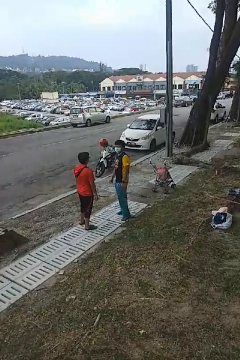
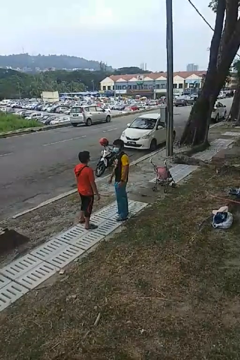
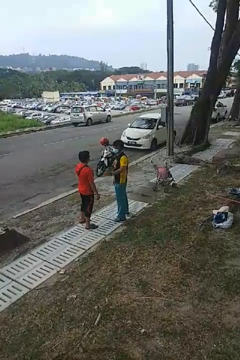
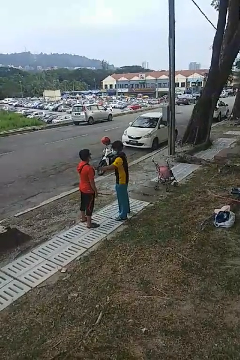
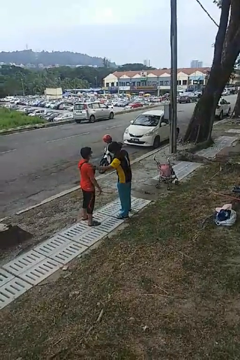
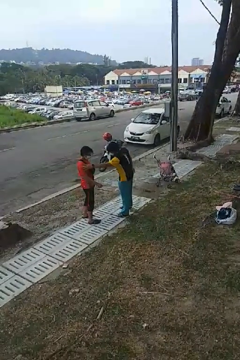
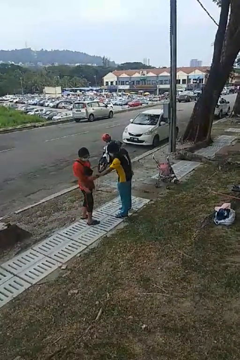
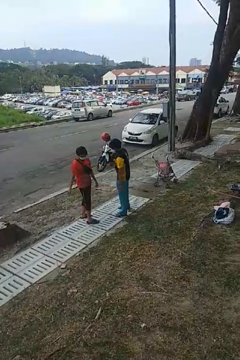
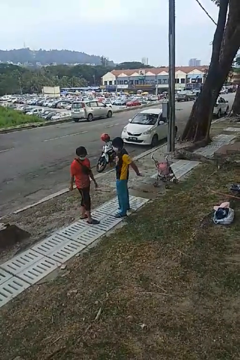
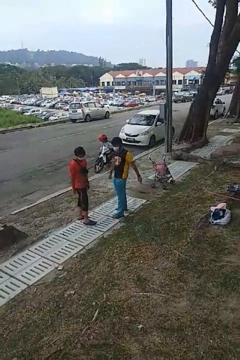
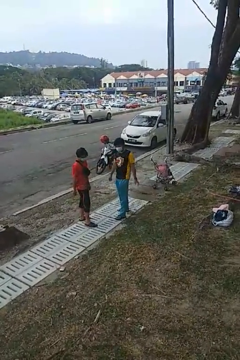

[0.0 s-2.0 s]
person shoves person

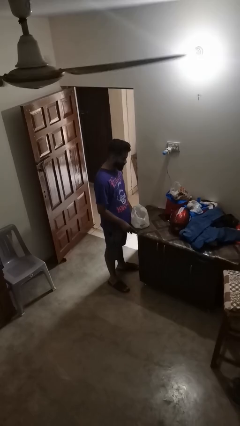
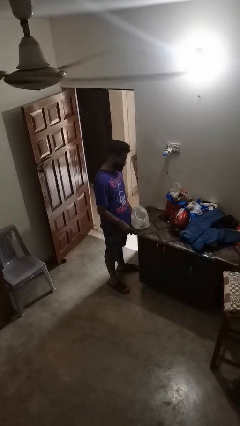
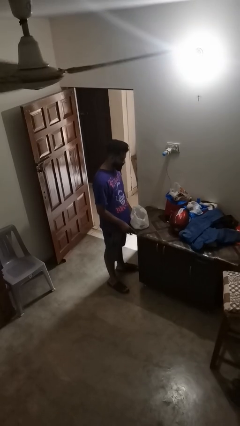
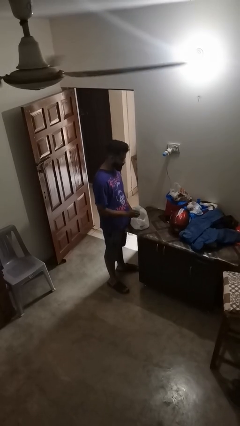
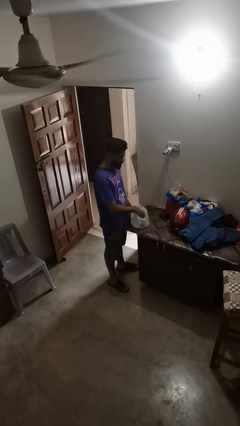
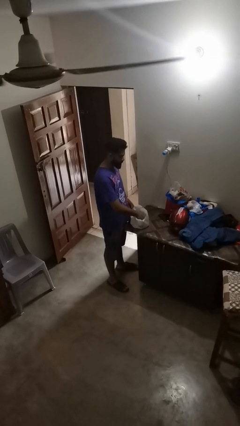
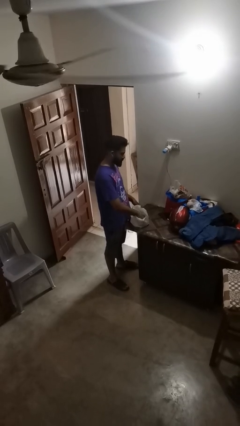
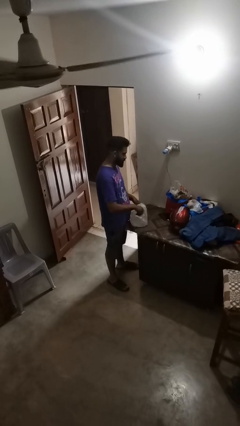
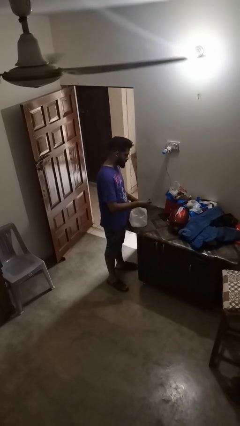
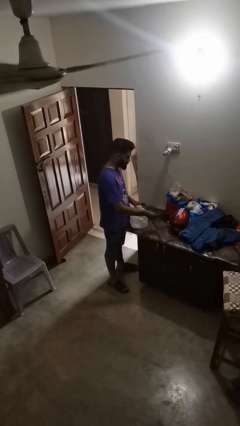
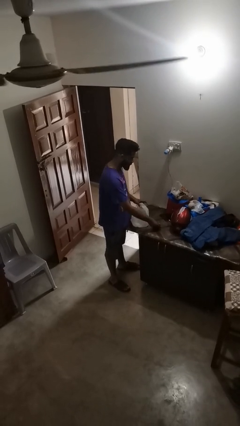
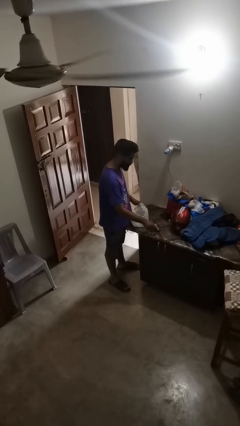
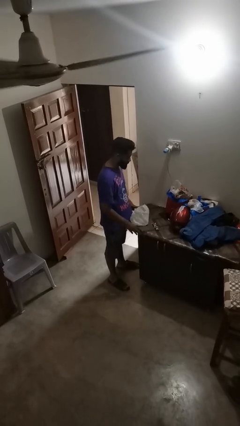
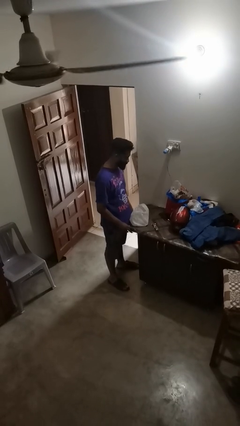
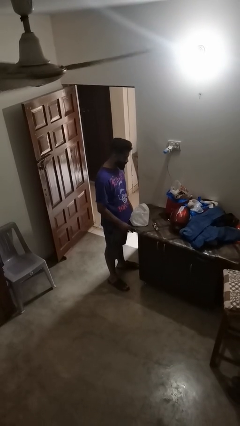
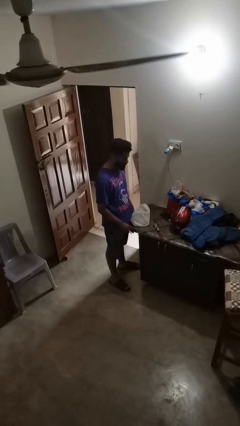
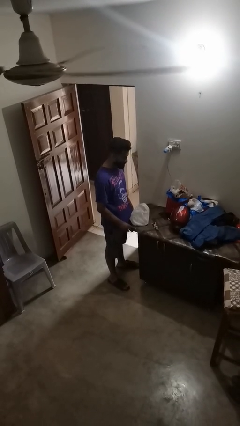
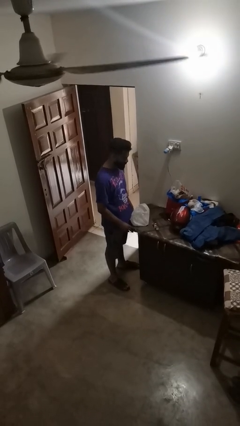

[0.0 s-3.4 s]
person takes object from bag

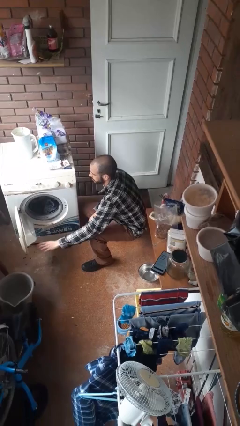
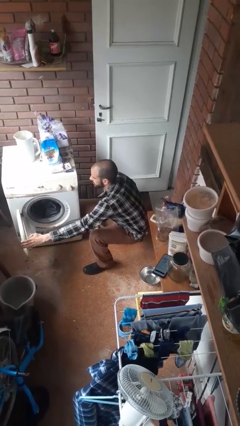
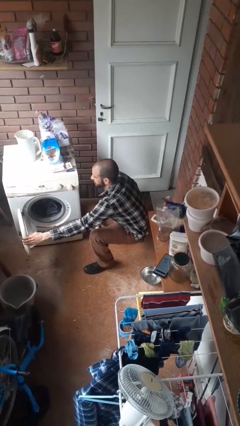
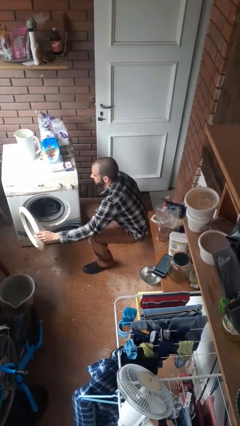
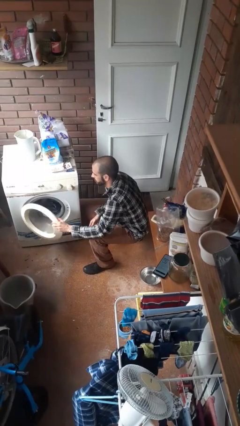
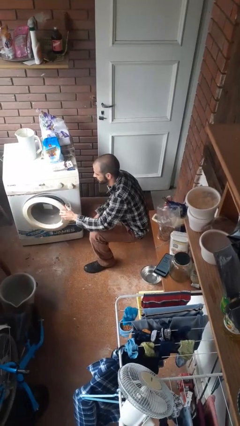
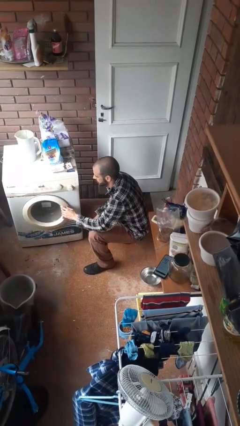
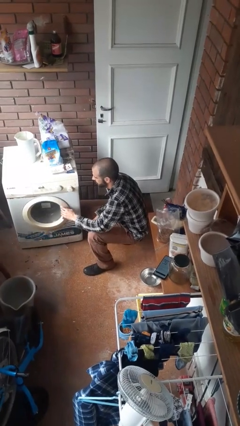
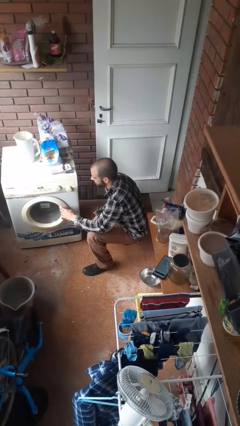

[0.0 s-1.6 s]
person closes clothes washer

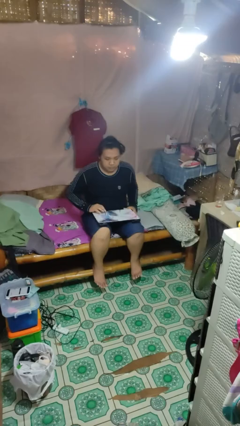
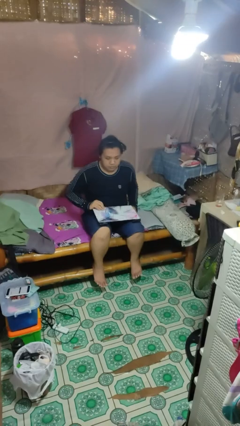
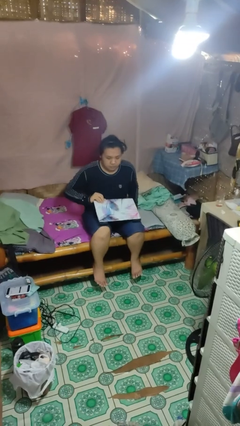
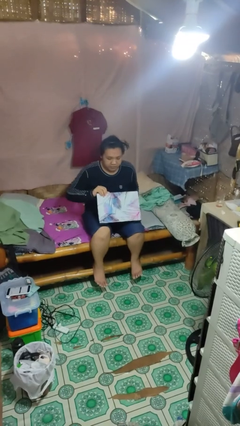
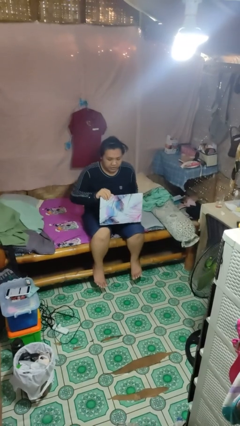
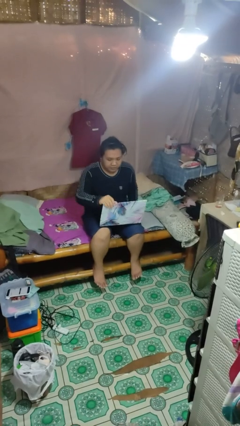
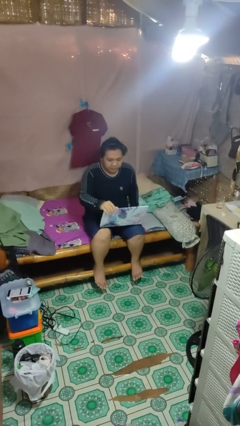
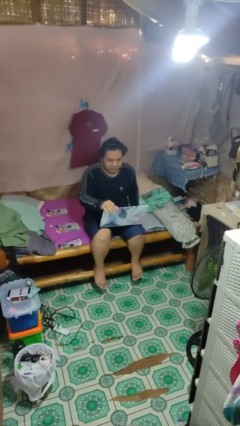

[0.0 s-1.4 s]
person opens laptop

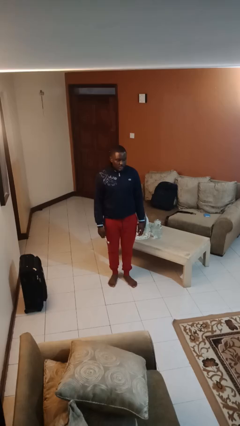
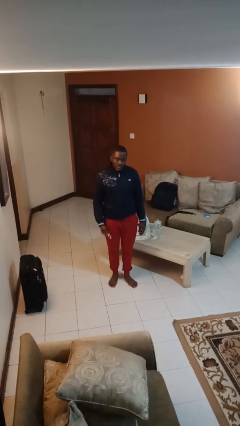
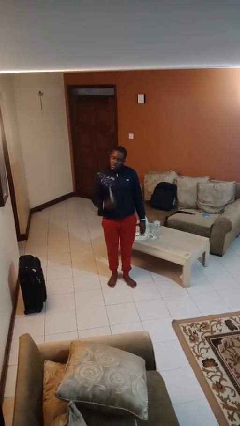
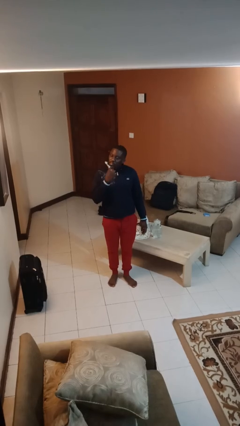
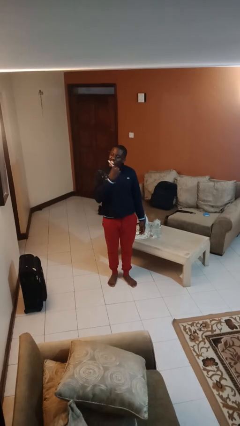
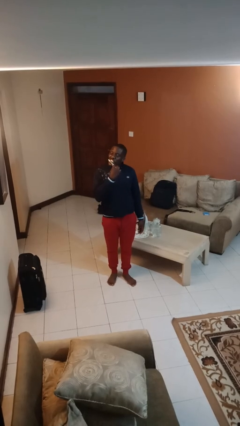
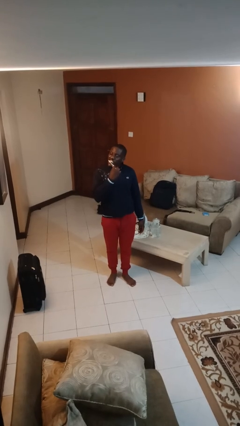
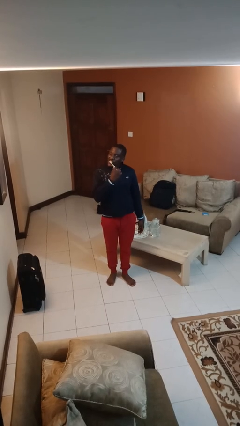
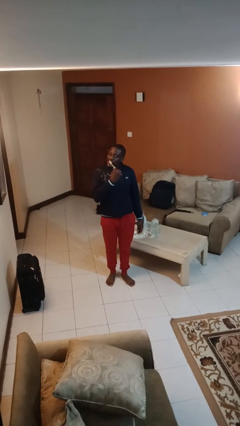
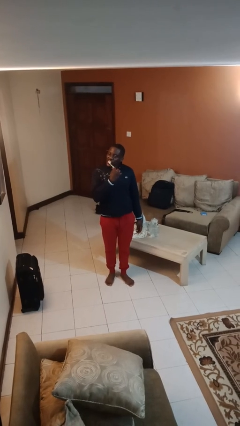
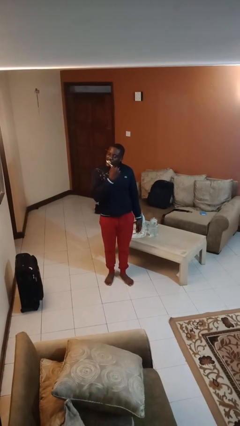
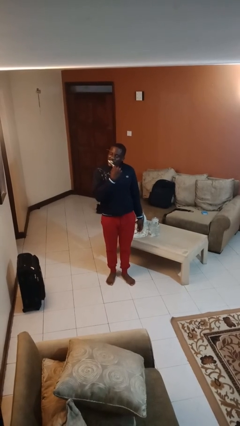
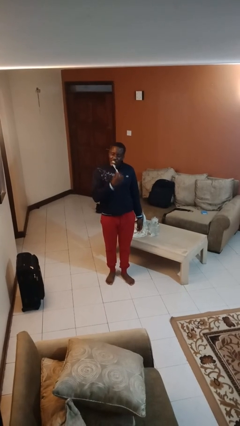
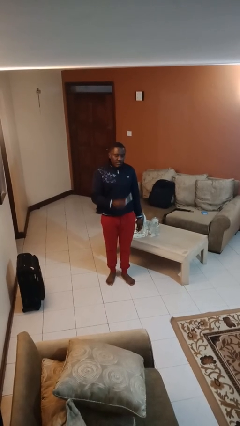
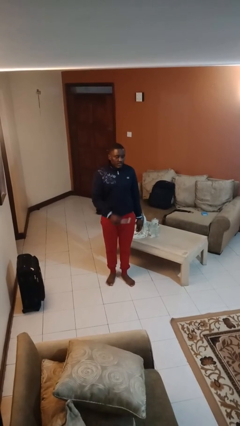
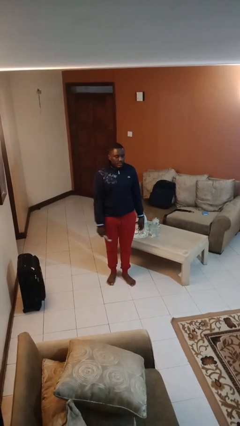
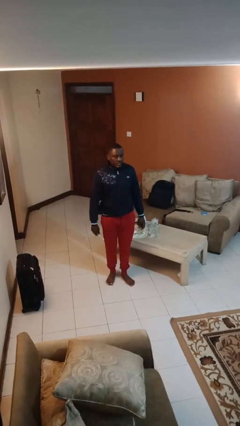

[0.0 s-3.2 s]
person brushes teeth

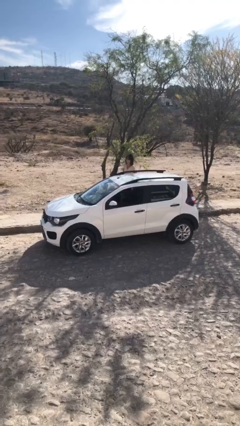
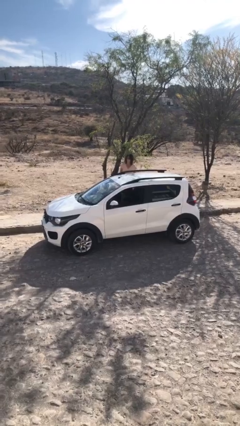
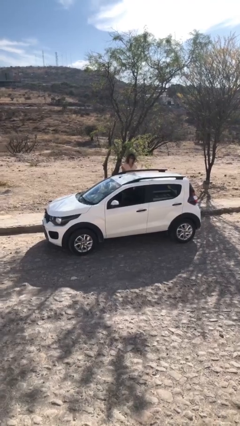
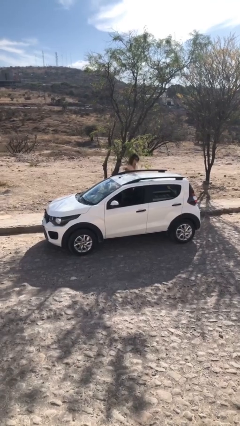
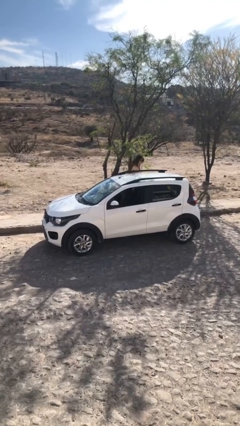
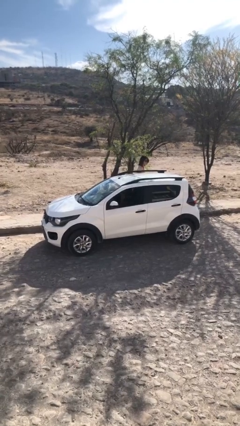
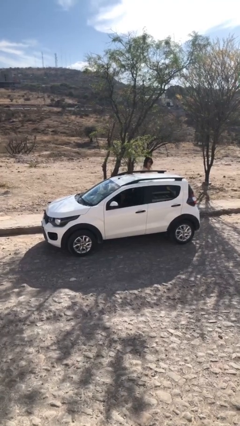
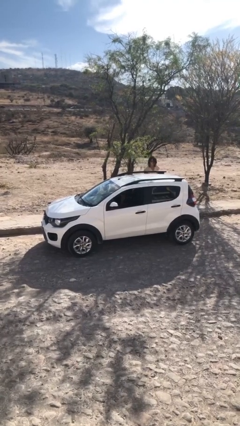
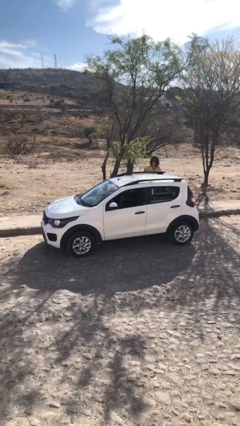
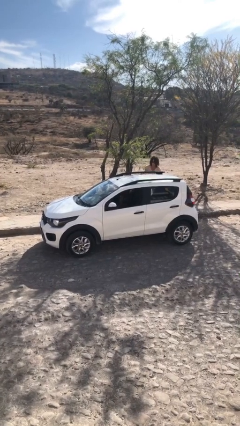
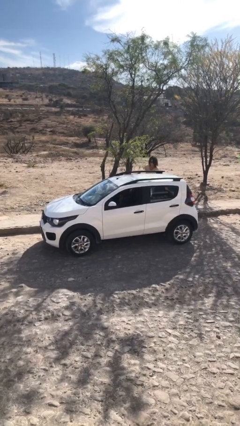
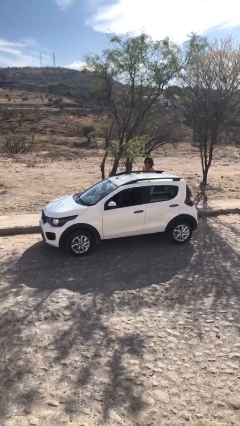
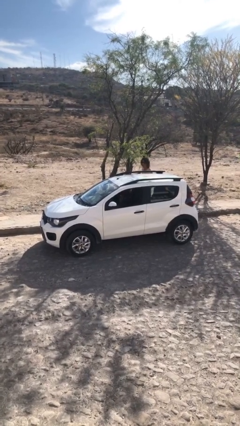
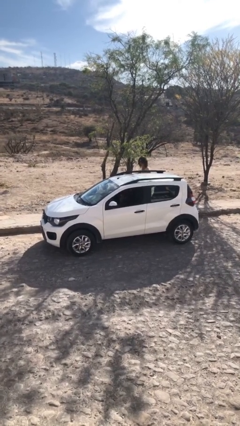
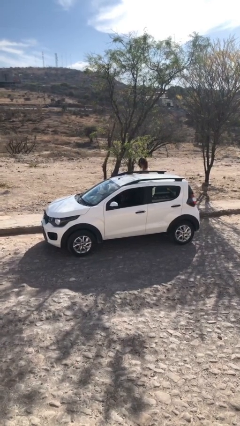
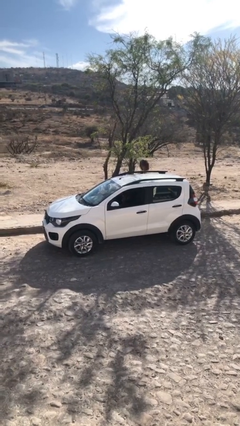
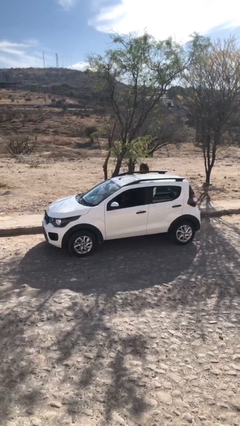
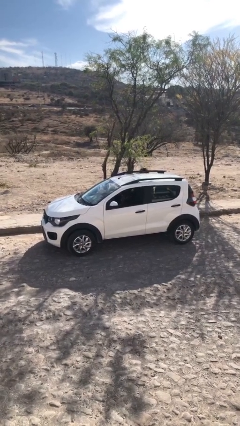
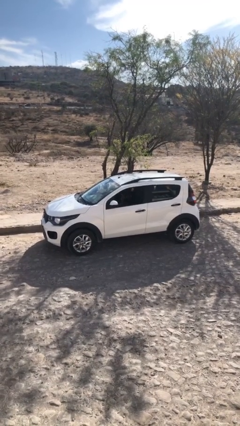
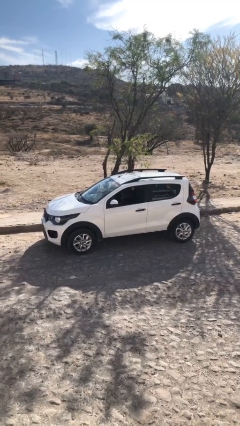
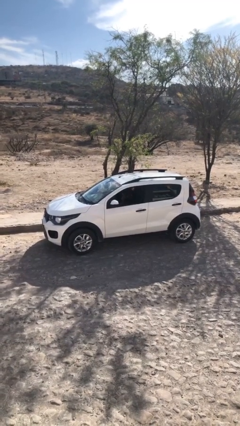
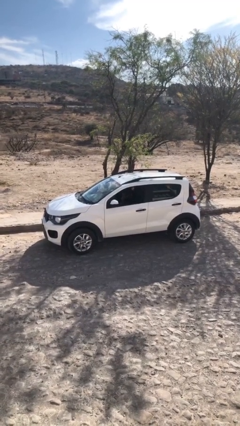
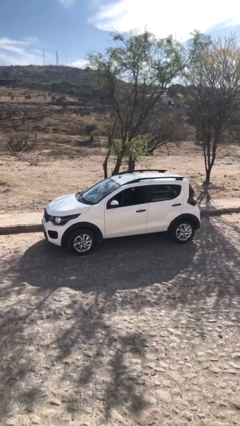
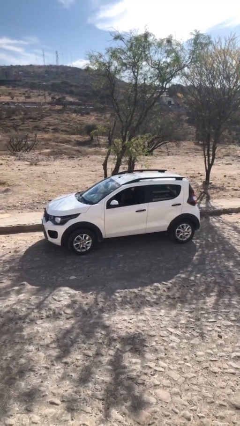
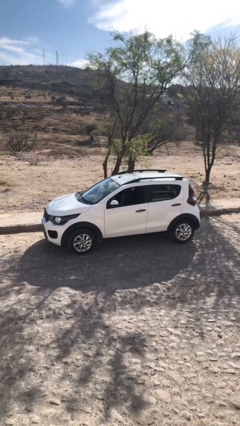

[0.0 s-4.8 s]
car picks up person

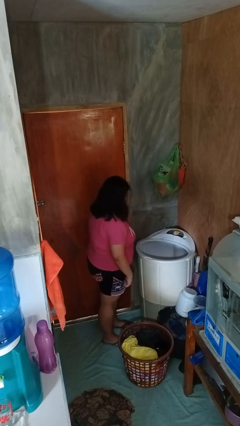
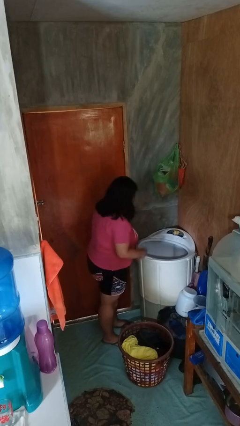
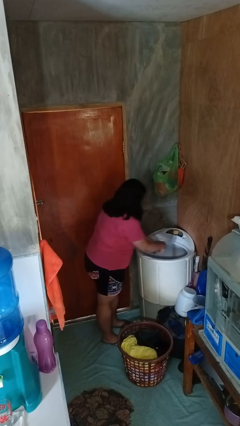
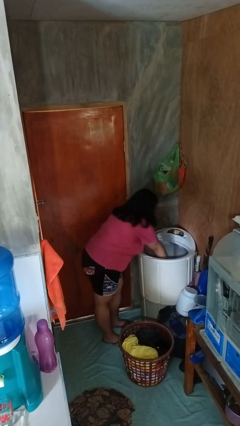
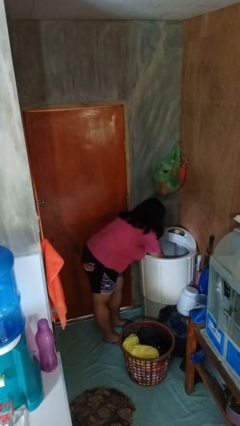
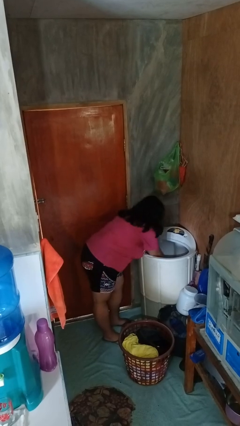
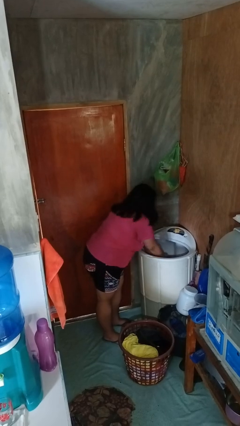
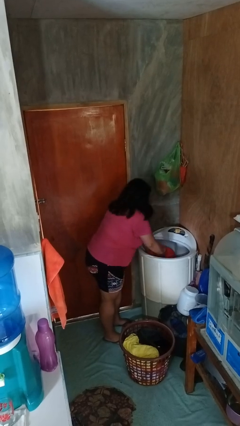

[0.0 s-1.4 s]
person unloads dryer
